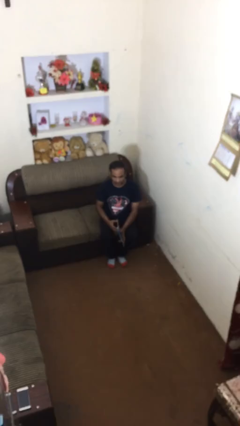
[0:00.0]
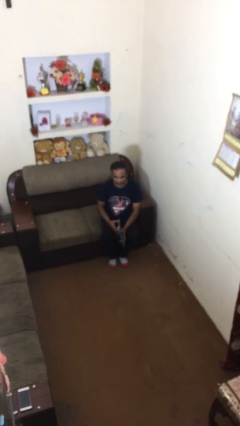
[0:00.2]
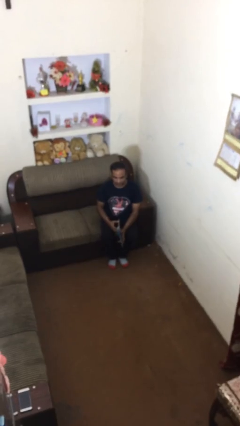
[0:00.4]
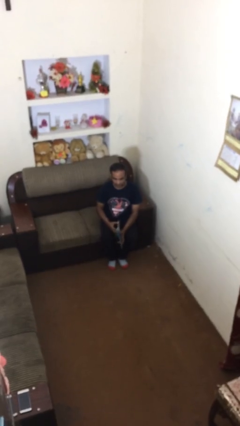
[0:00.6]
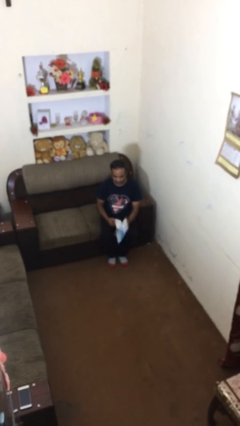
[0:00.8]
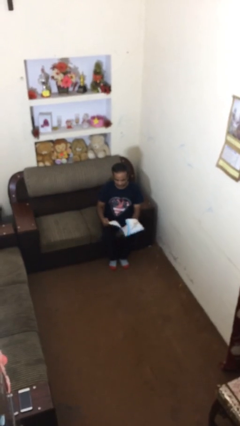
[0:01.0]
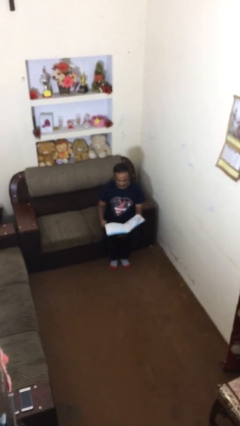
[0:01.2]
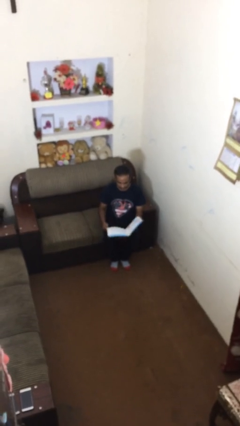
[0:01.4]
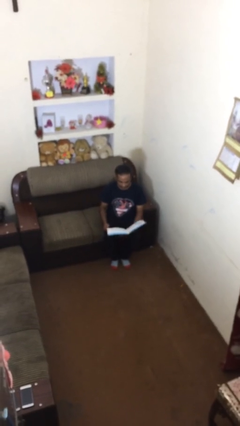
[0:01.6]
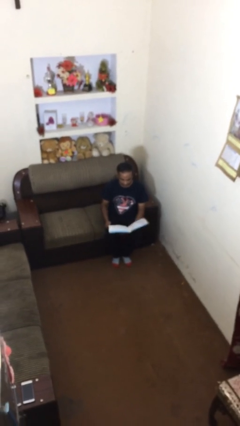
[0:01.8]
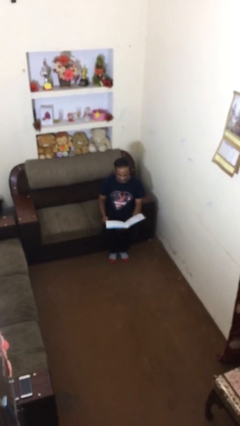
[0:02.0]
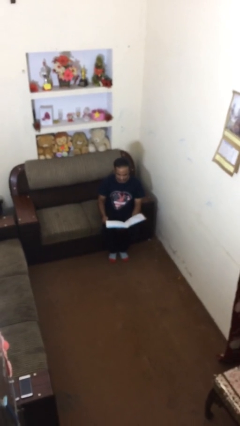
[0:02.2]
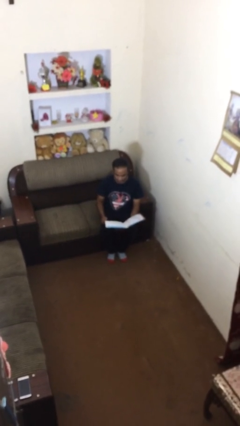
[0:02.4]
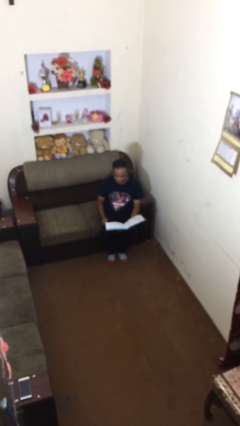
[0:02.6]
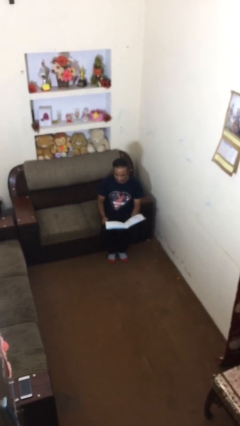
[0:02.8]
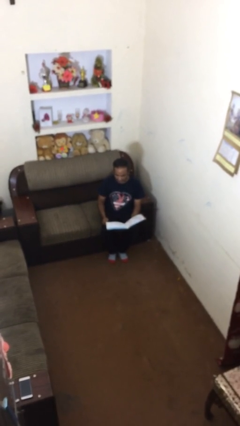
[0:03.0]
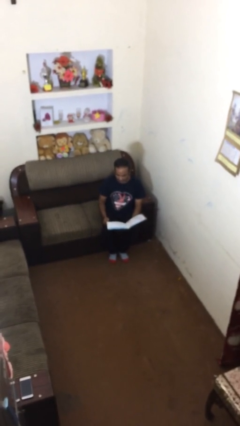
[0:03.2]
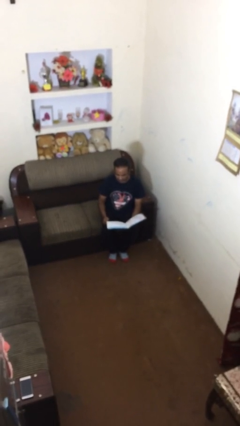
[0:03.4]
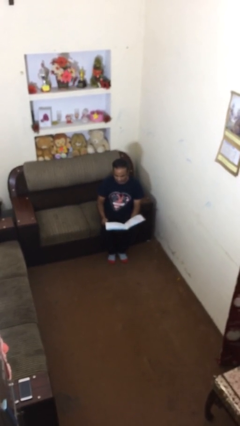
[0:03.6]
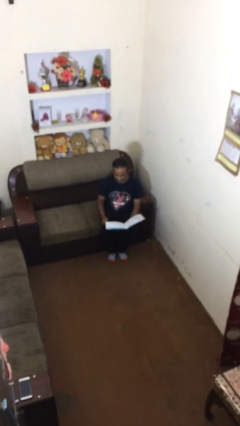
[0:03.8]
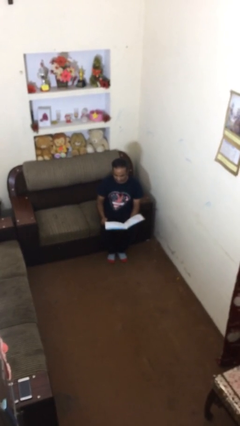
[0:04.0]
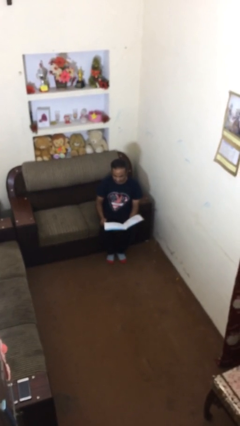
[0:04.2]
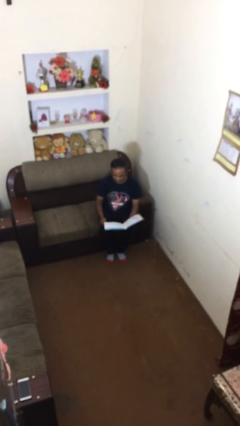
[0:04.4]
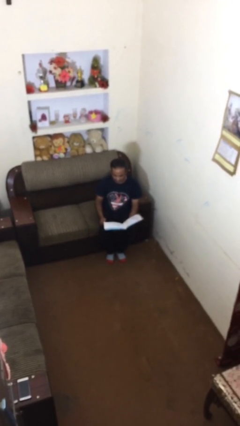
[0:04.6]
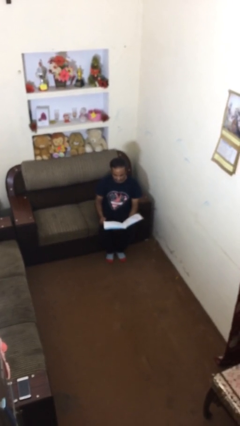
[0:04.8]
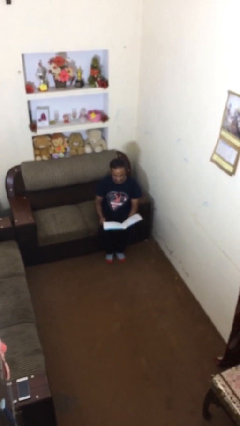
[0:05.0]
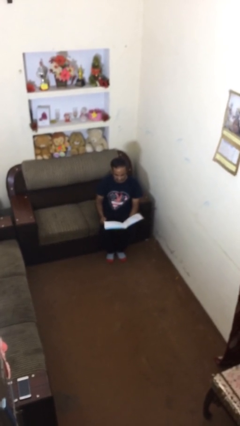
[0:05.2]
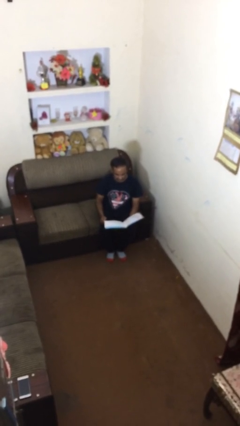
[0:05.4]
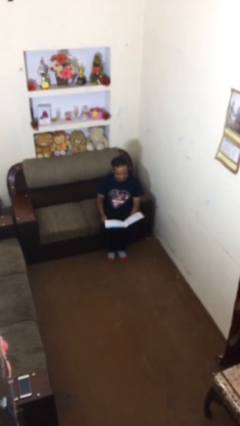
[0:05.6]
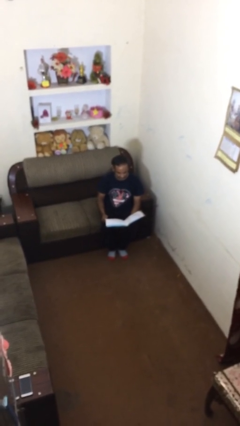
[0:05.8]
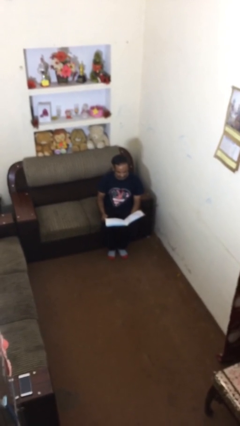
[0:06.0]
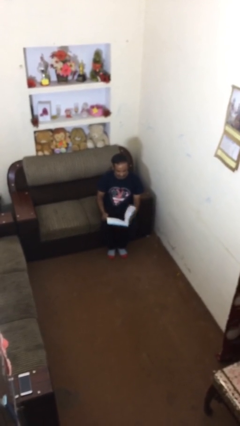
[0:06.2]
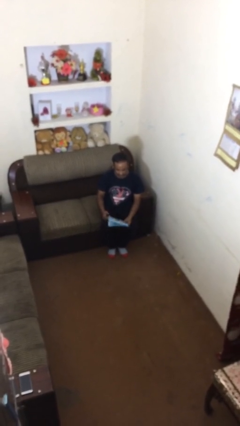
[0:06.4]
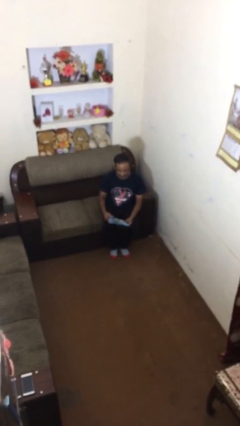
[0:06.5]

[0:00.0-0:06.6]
person reads document

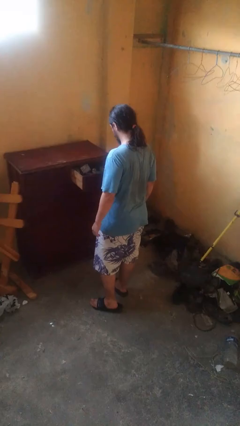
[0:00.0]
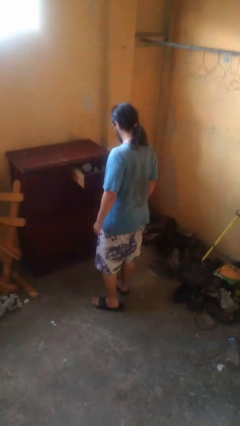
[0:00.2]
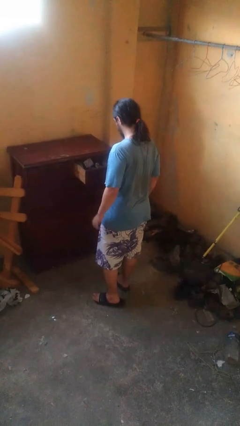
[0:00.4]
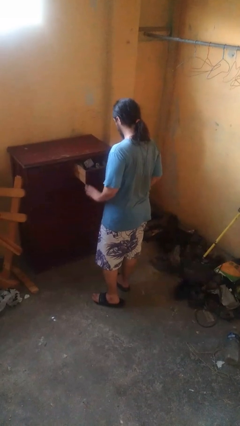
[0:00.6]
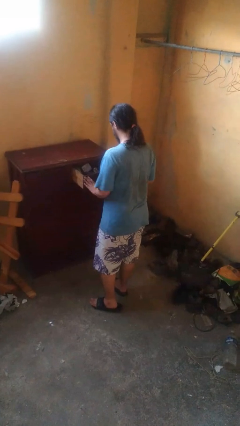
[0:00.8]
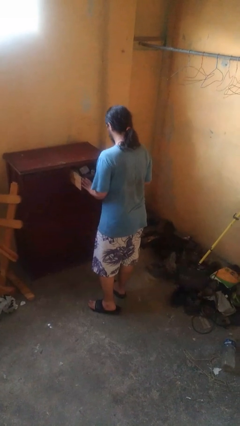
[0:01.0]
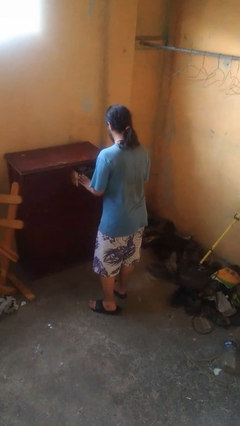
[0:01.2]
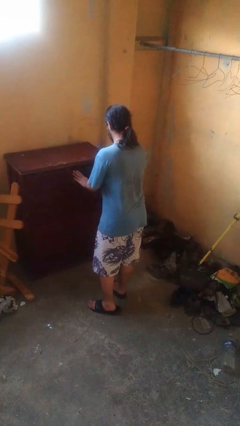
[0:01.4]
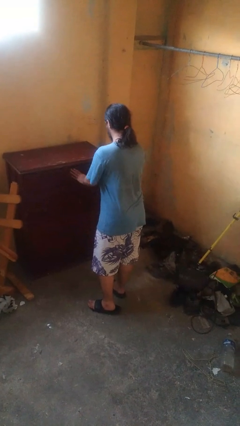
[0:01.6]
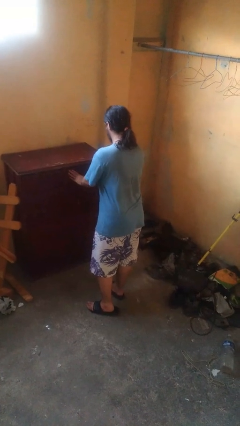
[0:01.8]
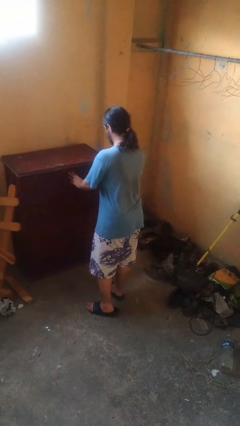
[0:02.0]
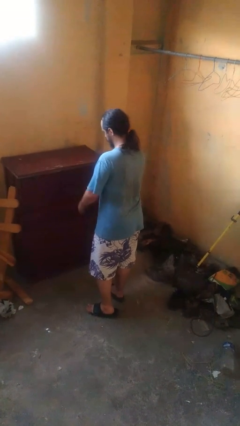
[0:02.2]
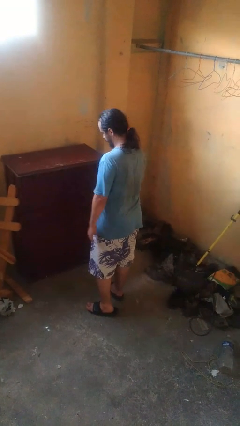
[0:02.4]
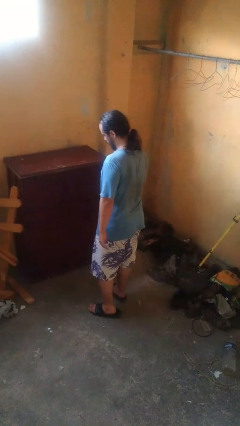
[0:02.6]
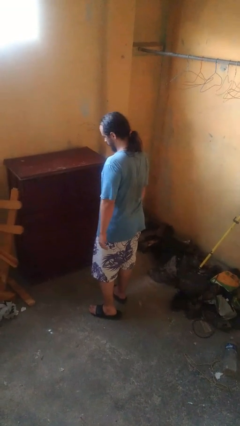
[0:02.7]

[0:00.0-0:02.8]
person closes dresser drawer

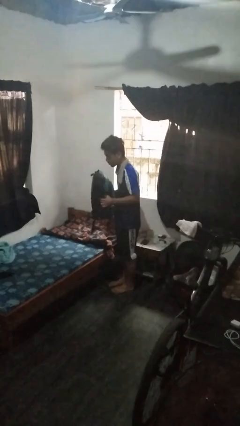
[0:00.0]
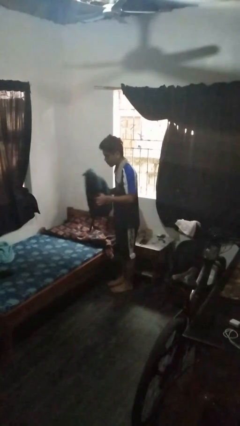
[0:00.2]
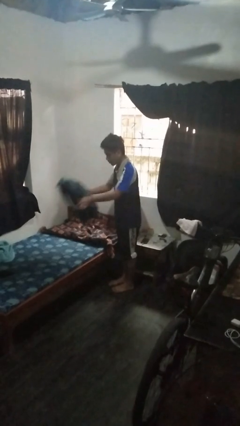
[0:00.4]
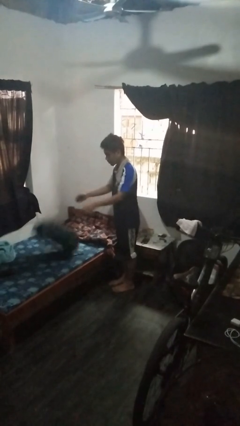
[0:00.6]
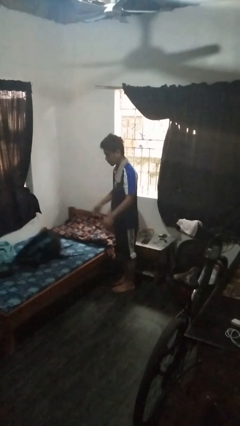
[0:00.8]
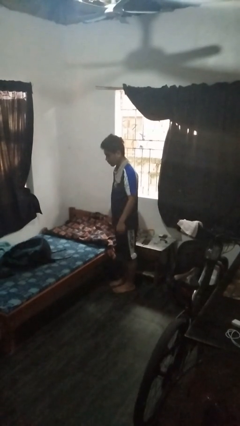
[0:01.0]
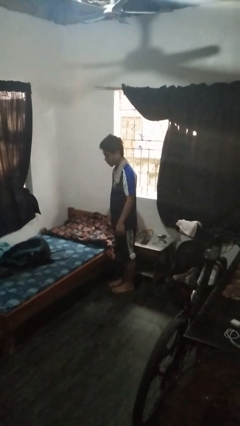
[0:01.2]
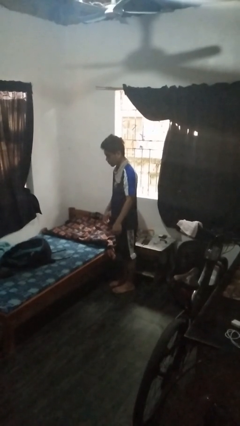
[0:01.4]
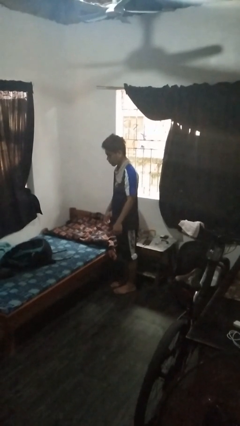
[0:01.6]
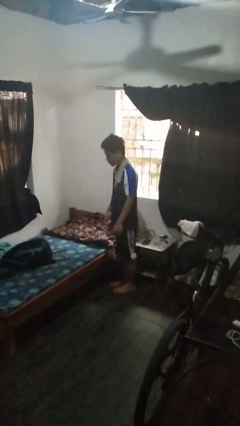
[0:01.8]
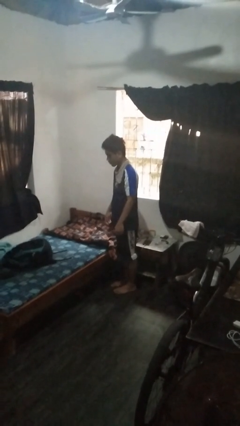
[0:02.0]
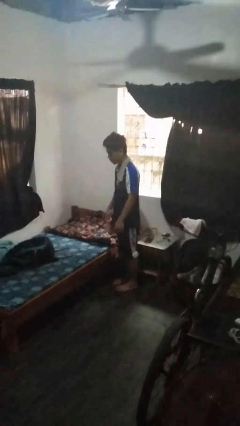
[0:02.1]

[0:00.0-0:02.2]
person throws object on bed

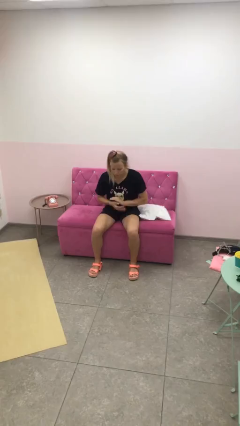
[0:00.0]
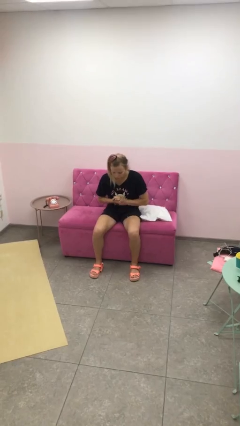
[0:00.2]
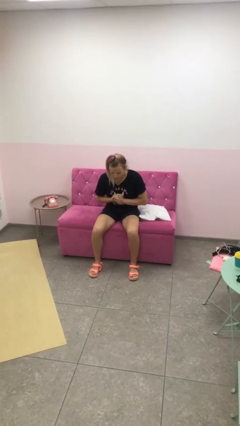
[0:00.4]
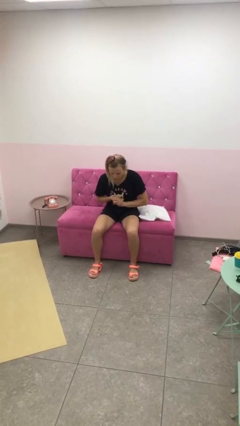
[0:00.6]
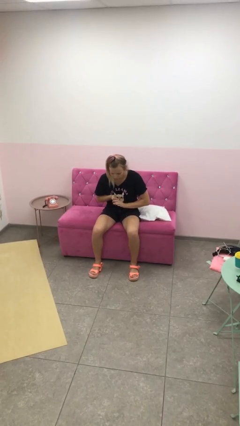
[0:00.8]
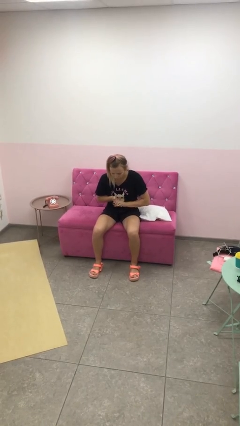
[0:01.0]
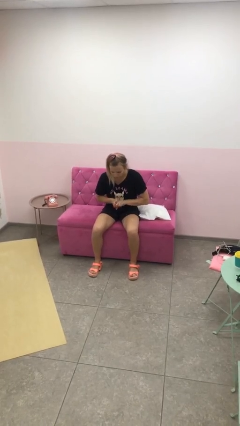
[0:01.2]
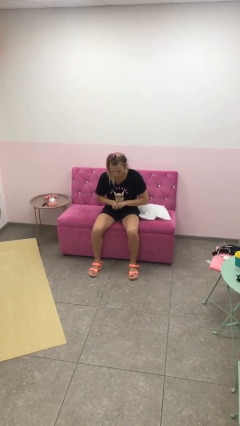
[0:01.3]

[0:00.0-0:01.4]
person looks at hands in lap

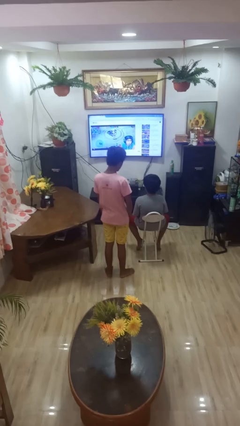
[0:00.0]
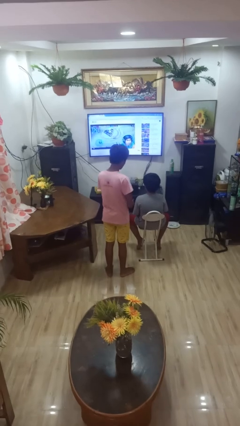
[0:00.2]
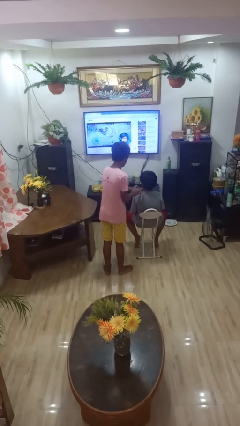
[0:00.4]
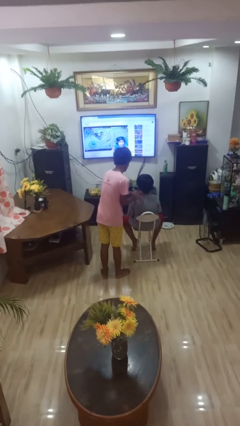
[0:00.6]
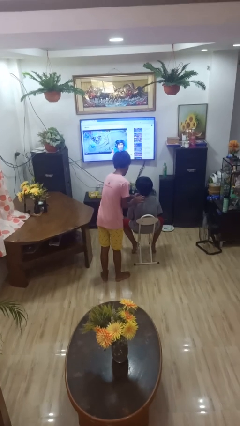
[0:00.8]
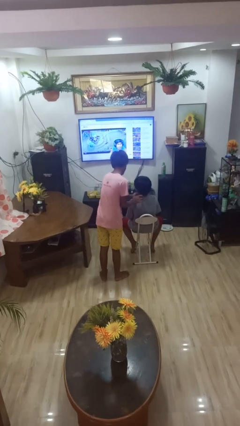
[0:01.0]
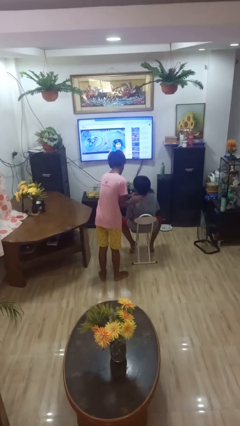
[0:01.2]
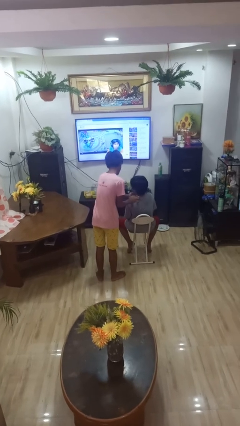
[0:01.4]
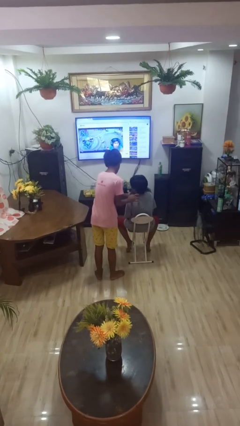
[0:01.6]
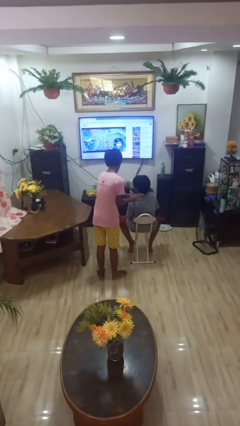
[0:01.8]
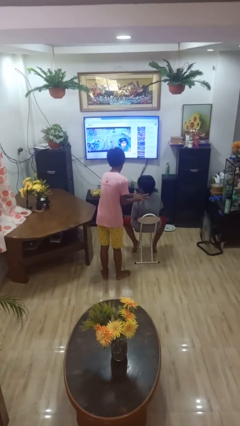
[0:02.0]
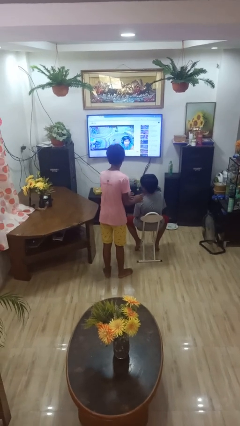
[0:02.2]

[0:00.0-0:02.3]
person tickles person

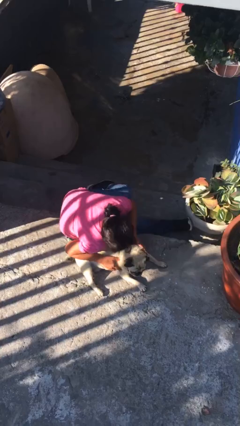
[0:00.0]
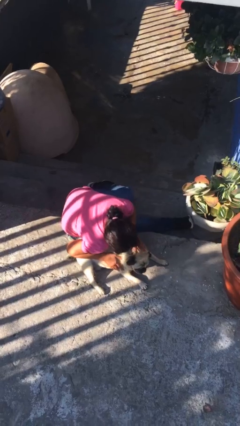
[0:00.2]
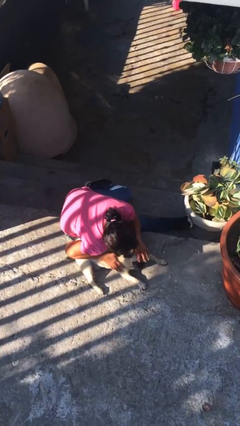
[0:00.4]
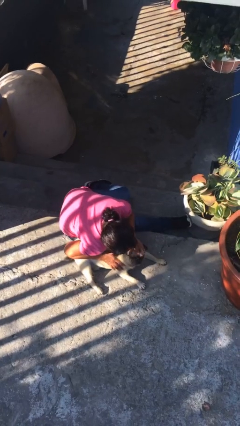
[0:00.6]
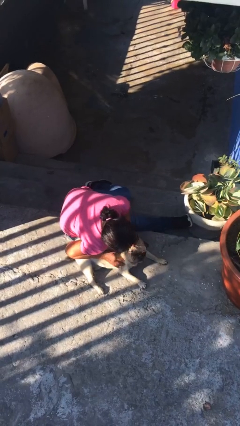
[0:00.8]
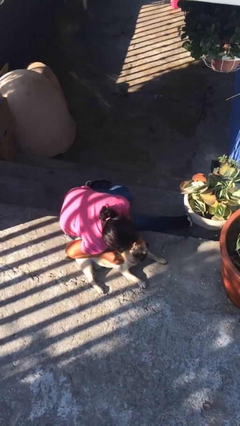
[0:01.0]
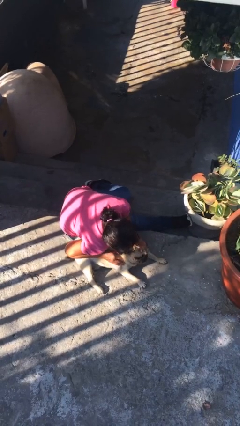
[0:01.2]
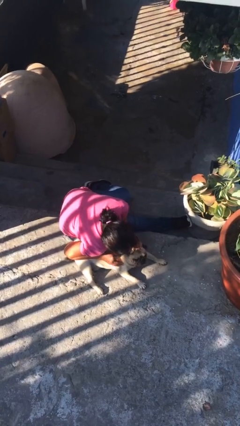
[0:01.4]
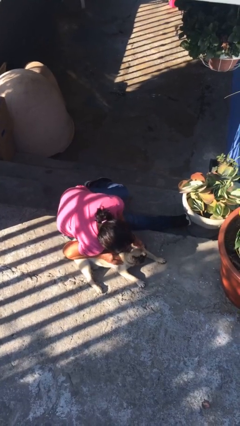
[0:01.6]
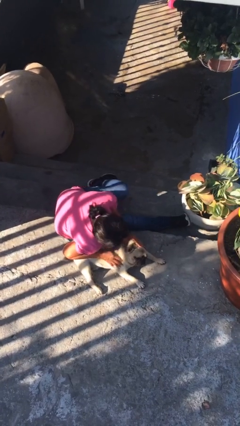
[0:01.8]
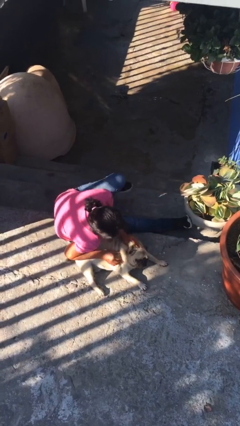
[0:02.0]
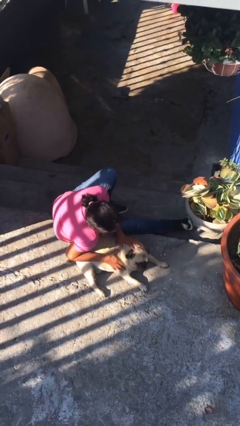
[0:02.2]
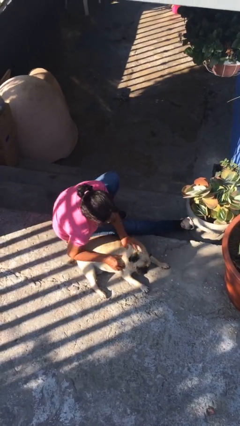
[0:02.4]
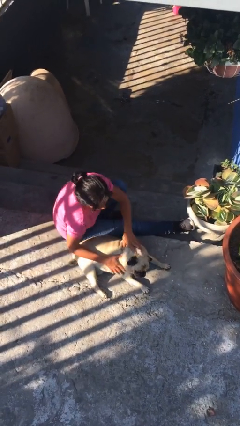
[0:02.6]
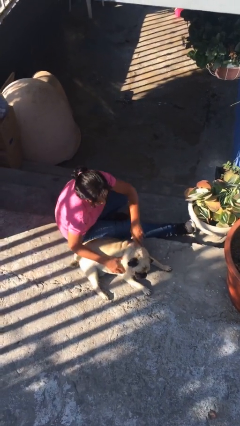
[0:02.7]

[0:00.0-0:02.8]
person hugs dog
